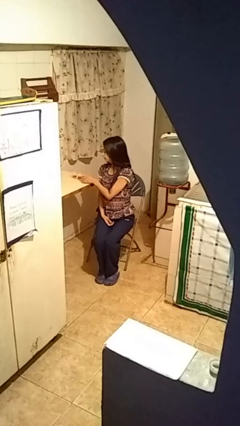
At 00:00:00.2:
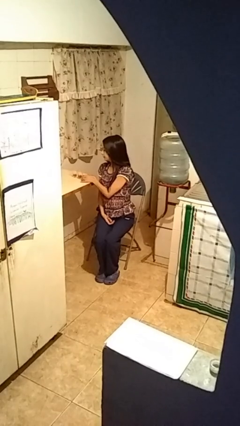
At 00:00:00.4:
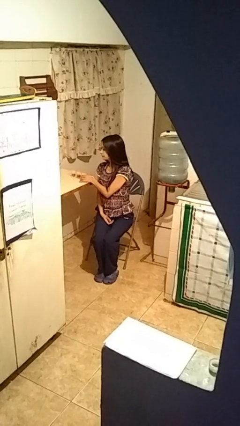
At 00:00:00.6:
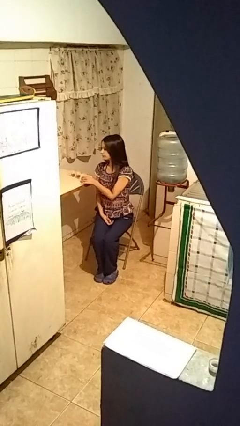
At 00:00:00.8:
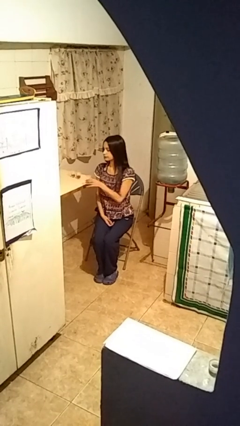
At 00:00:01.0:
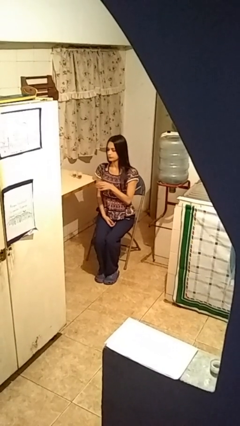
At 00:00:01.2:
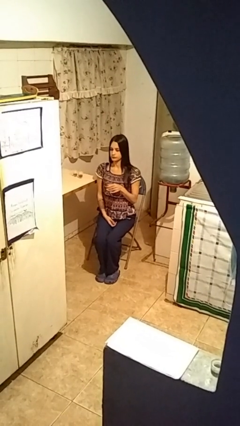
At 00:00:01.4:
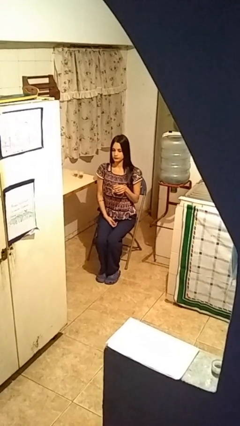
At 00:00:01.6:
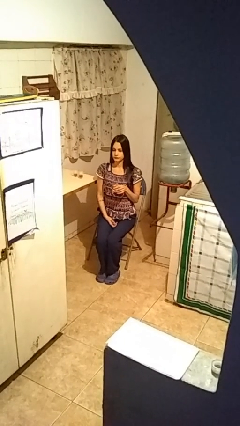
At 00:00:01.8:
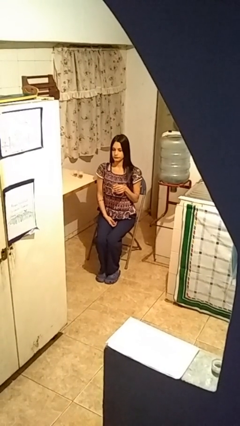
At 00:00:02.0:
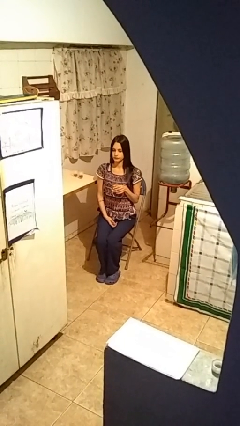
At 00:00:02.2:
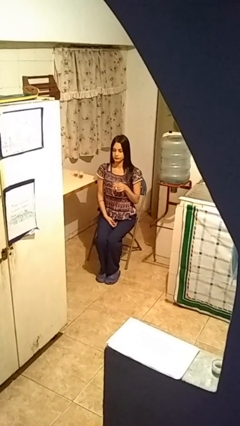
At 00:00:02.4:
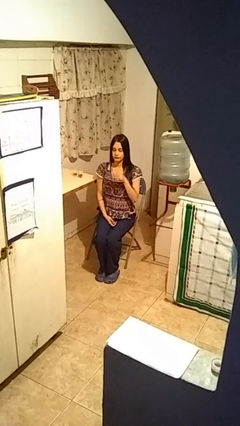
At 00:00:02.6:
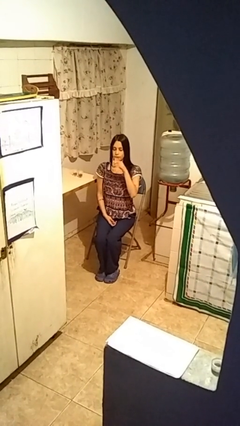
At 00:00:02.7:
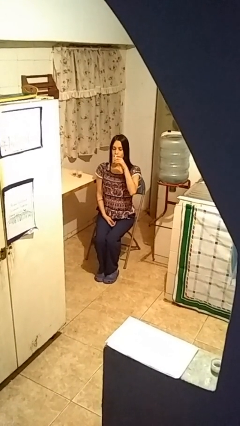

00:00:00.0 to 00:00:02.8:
person picks up object from table

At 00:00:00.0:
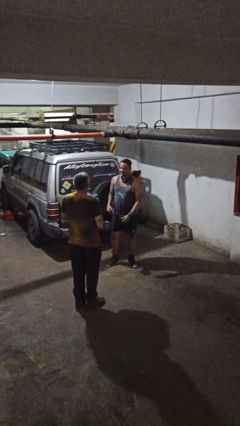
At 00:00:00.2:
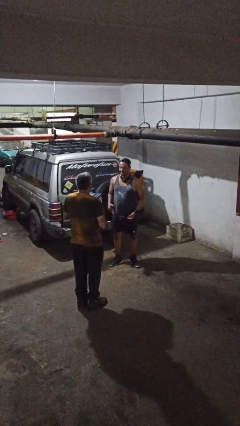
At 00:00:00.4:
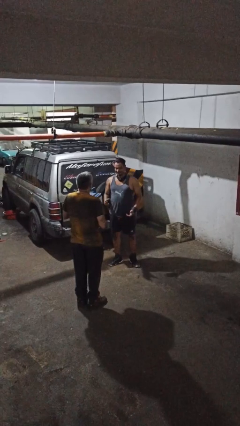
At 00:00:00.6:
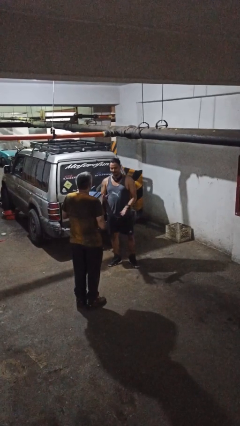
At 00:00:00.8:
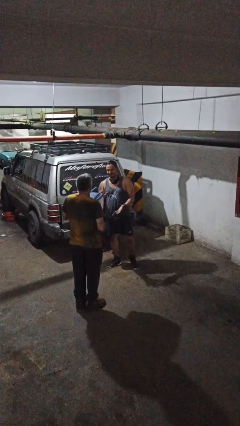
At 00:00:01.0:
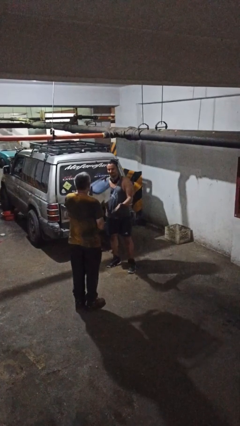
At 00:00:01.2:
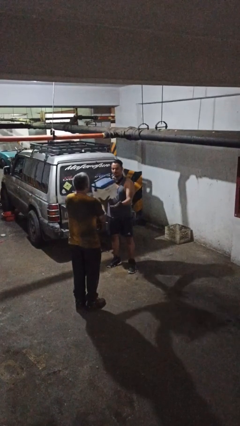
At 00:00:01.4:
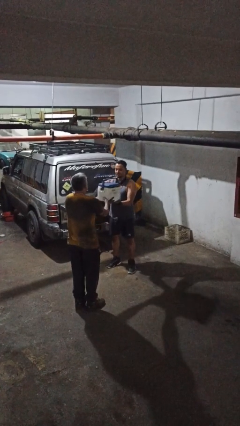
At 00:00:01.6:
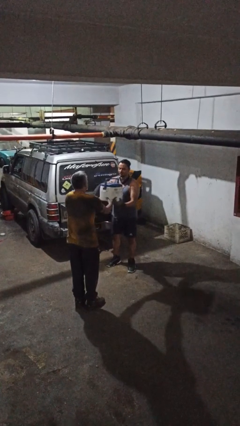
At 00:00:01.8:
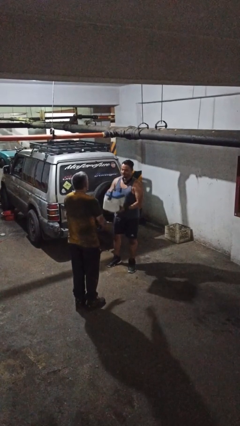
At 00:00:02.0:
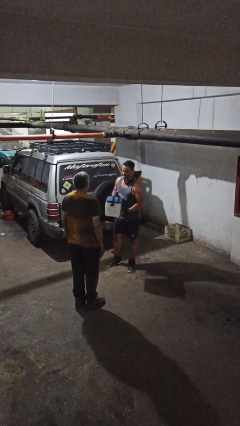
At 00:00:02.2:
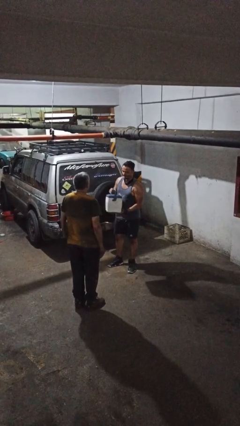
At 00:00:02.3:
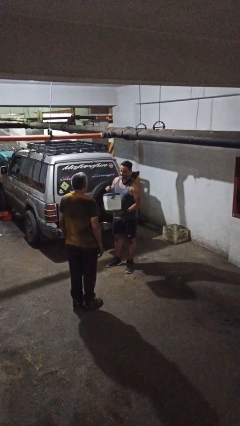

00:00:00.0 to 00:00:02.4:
person transfers object to person

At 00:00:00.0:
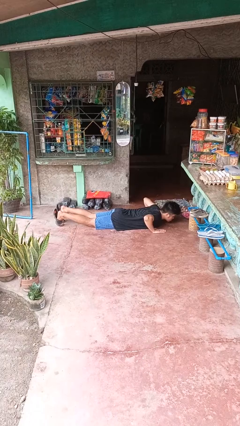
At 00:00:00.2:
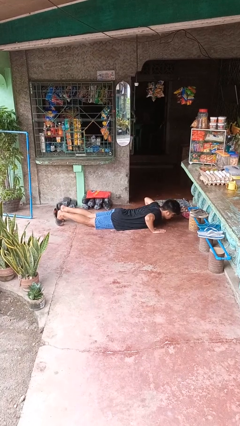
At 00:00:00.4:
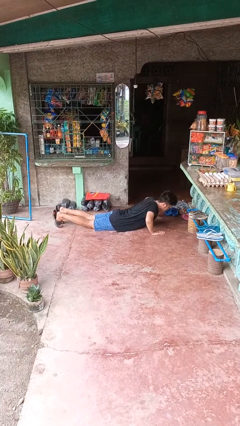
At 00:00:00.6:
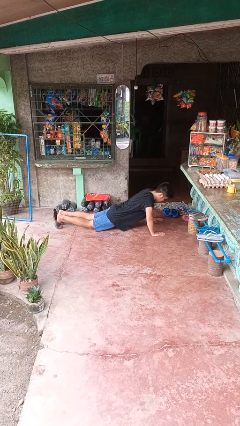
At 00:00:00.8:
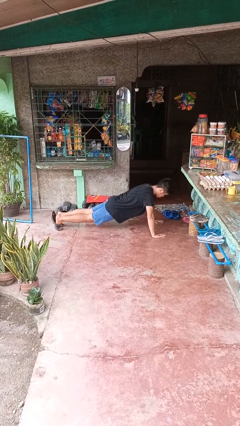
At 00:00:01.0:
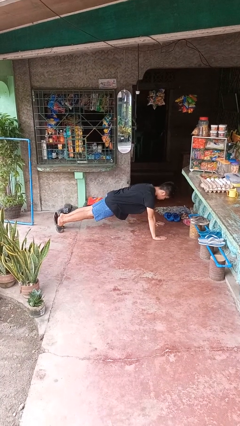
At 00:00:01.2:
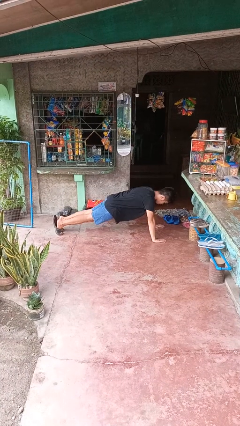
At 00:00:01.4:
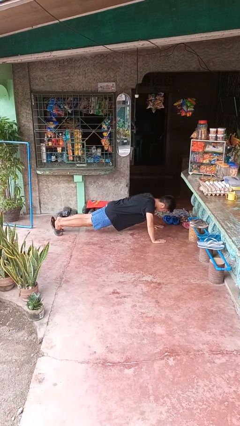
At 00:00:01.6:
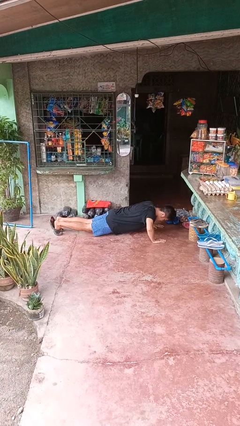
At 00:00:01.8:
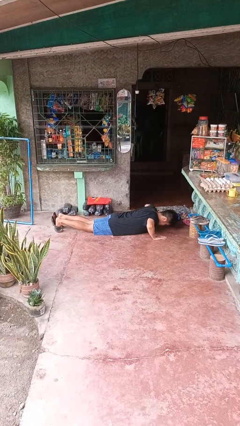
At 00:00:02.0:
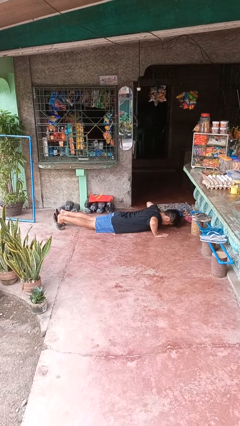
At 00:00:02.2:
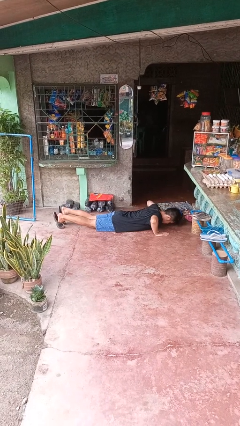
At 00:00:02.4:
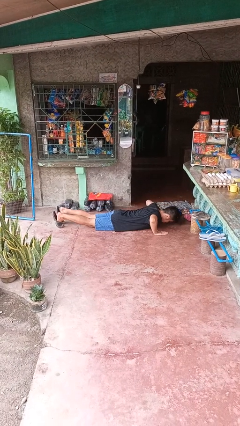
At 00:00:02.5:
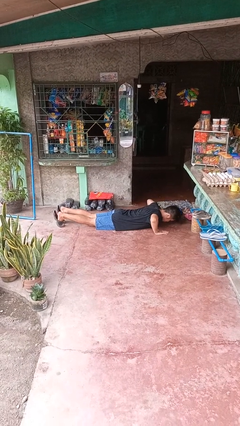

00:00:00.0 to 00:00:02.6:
person exercises with pushup

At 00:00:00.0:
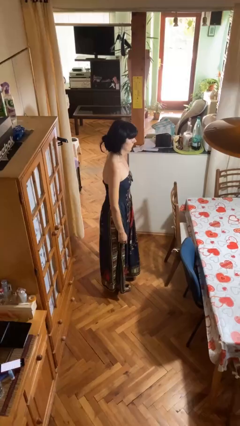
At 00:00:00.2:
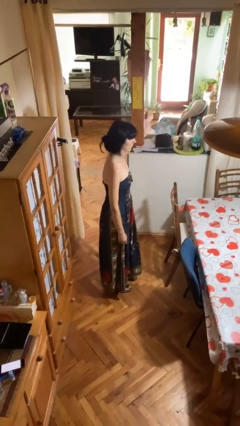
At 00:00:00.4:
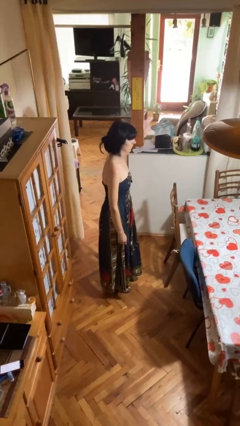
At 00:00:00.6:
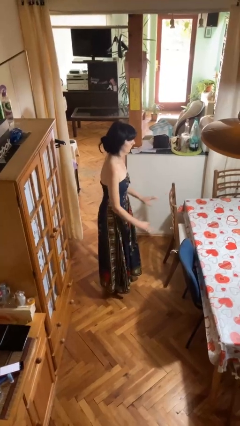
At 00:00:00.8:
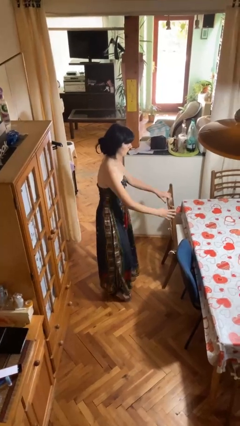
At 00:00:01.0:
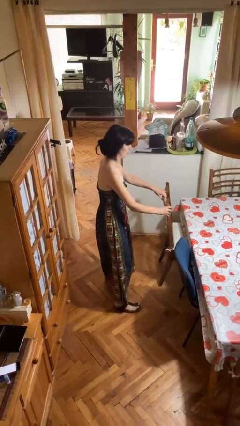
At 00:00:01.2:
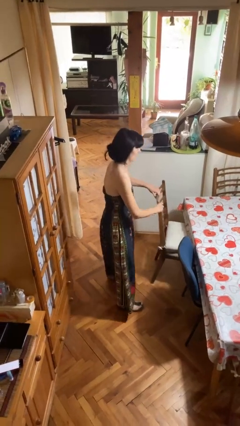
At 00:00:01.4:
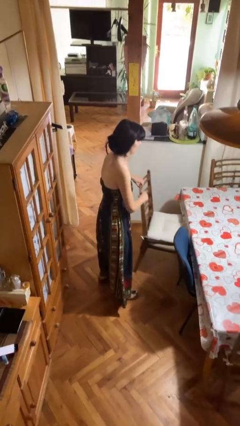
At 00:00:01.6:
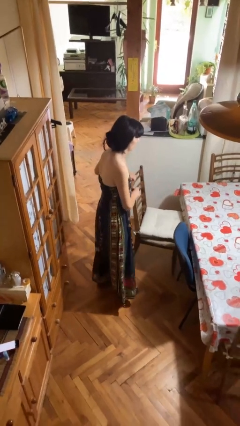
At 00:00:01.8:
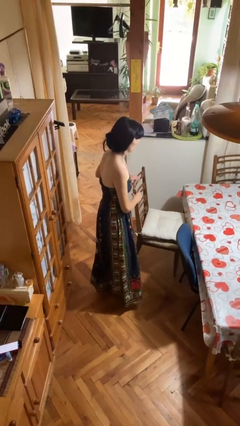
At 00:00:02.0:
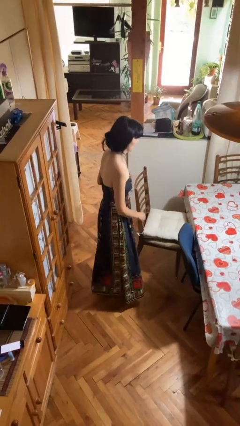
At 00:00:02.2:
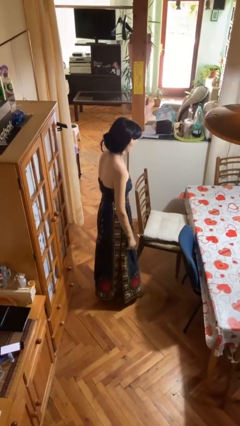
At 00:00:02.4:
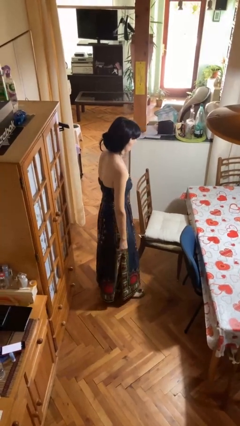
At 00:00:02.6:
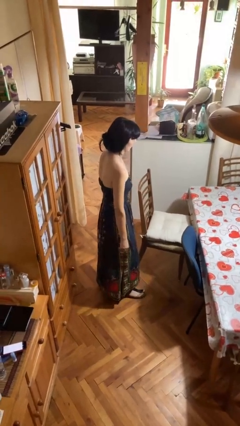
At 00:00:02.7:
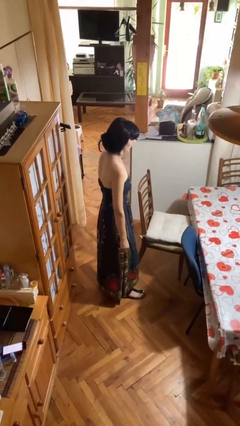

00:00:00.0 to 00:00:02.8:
person pulls out chair

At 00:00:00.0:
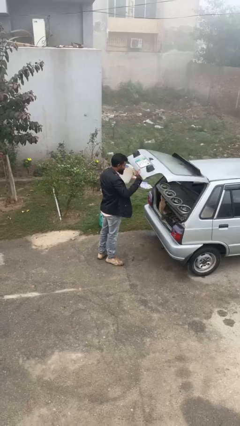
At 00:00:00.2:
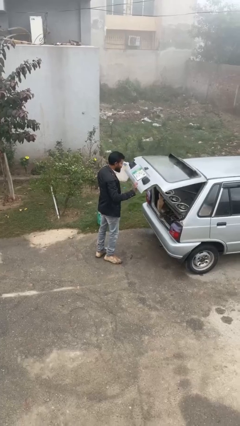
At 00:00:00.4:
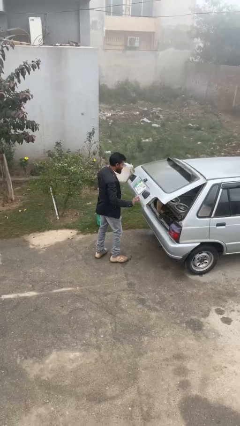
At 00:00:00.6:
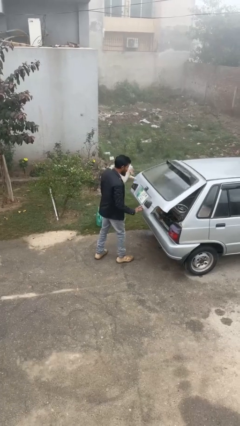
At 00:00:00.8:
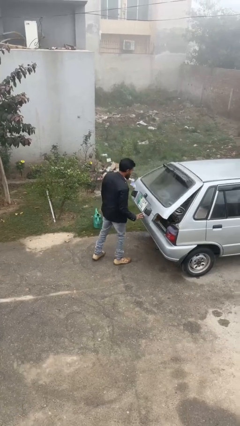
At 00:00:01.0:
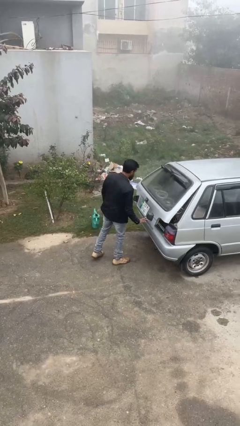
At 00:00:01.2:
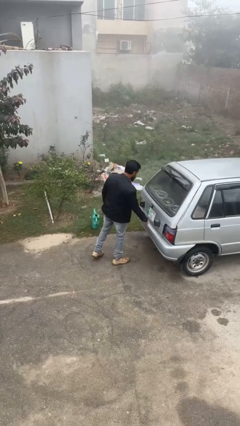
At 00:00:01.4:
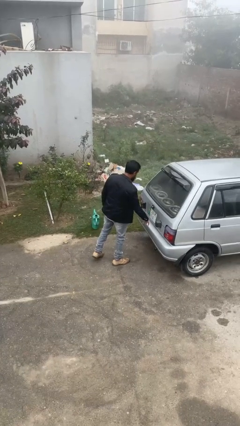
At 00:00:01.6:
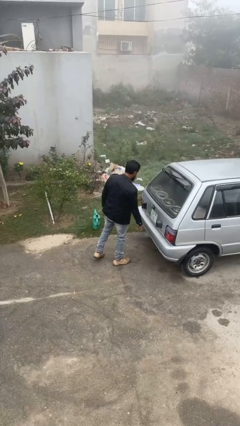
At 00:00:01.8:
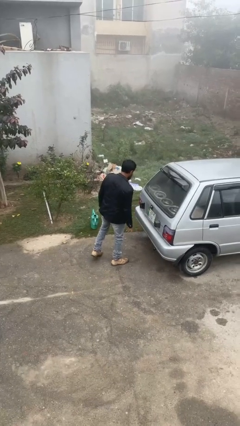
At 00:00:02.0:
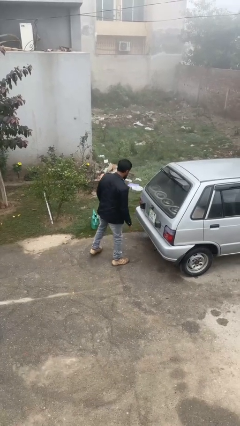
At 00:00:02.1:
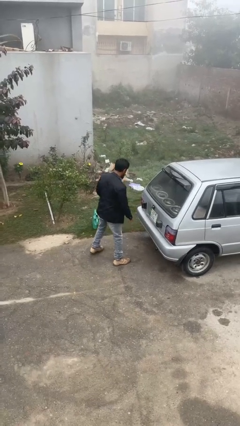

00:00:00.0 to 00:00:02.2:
person closes car trunk

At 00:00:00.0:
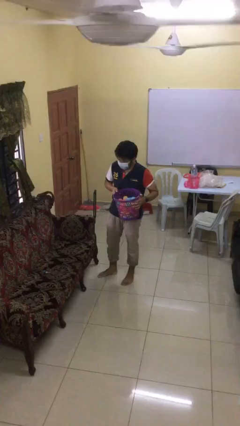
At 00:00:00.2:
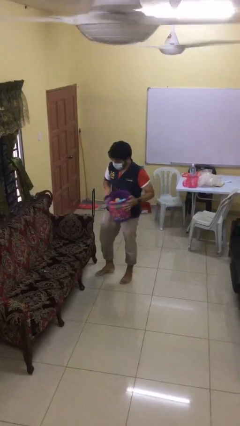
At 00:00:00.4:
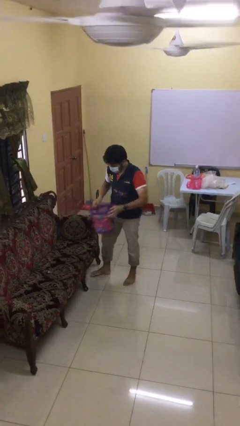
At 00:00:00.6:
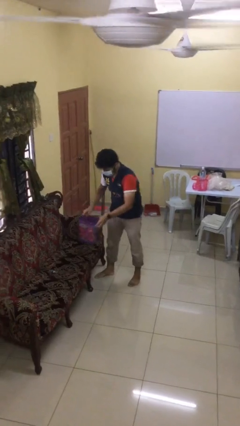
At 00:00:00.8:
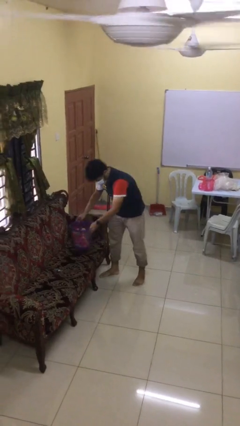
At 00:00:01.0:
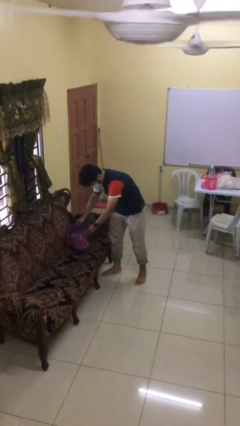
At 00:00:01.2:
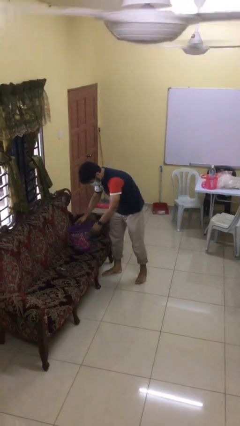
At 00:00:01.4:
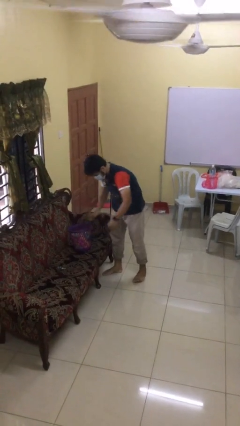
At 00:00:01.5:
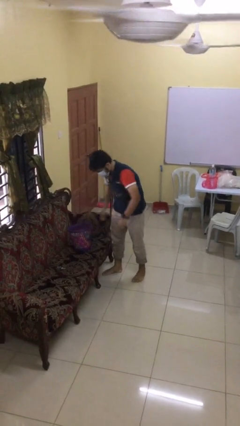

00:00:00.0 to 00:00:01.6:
person puts down object on couch

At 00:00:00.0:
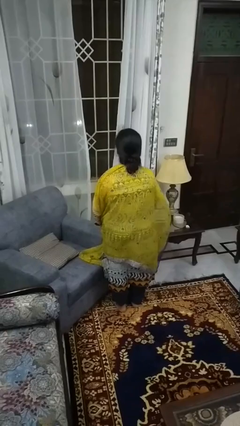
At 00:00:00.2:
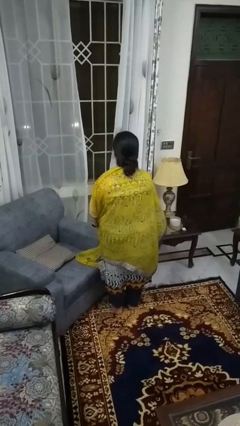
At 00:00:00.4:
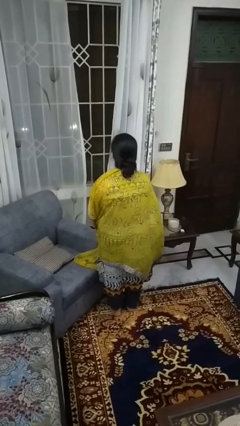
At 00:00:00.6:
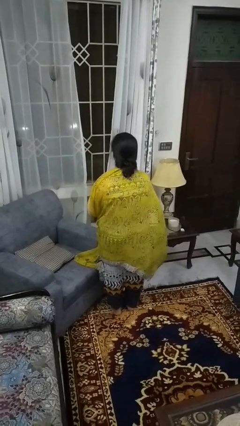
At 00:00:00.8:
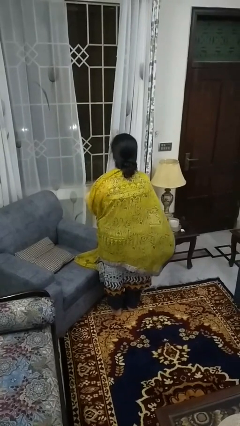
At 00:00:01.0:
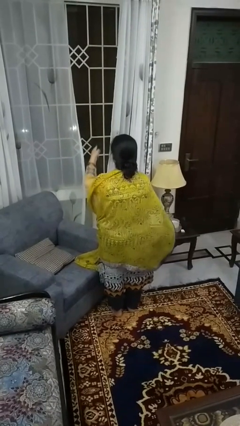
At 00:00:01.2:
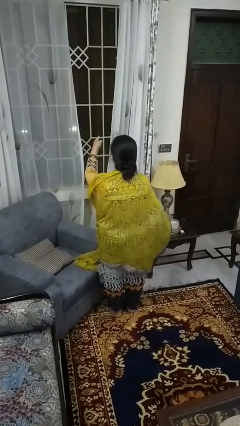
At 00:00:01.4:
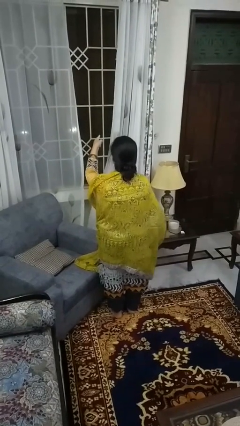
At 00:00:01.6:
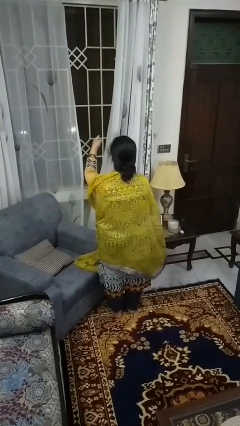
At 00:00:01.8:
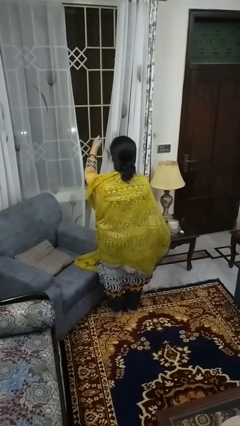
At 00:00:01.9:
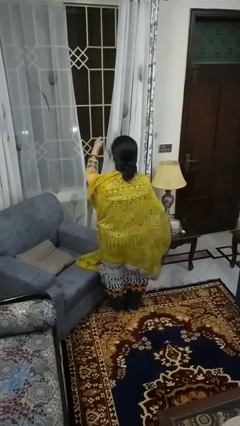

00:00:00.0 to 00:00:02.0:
person points at person

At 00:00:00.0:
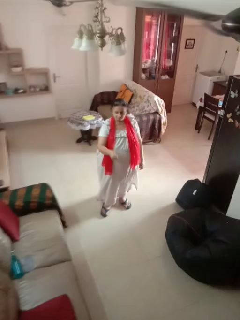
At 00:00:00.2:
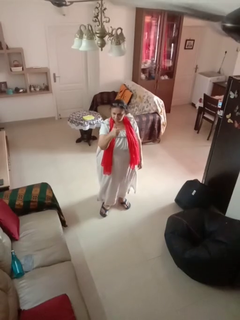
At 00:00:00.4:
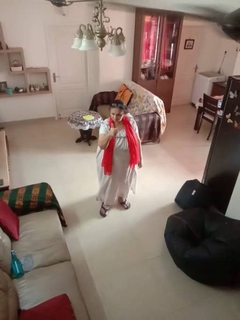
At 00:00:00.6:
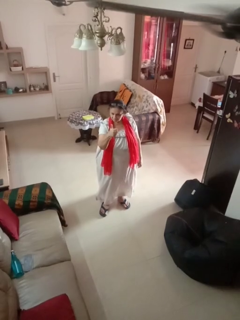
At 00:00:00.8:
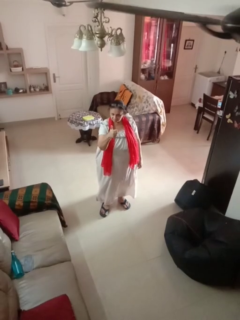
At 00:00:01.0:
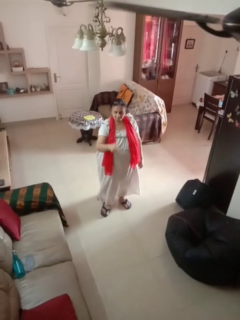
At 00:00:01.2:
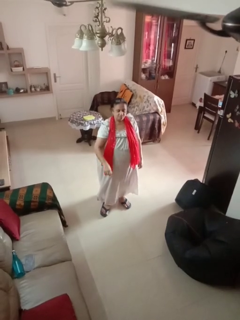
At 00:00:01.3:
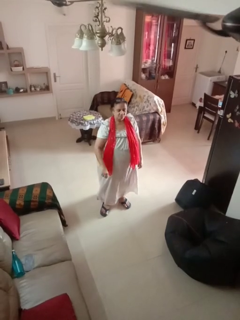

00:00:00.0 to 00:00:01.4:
person gestures thumbs up
